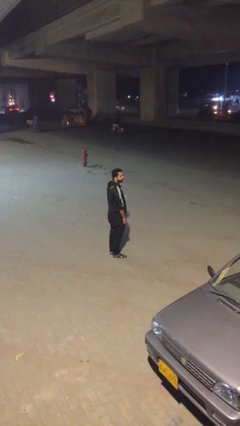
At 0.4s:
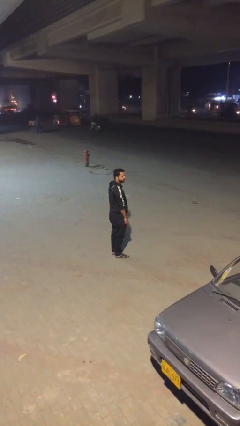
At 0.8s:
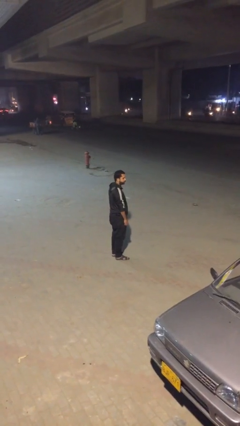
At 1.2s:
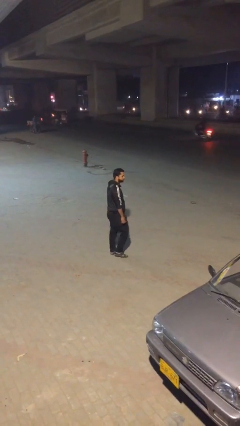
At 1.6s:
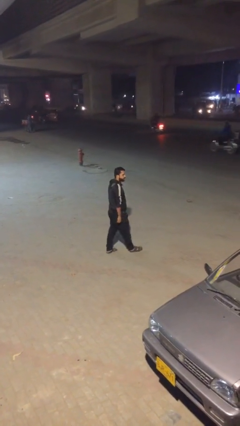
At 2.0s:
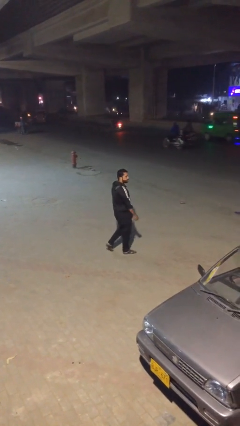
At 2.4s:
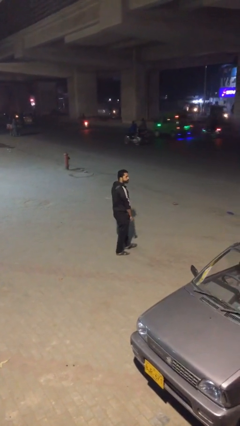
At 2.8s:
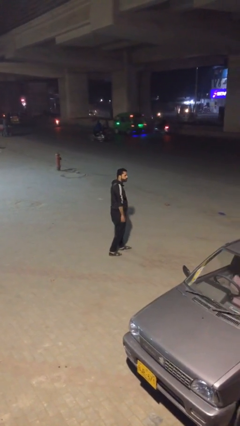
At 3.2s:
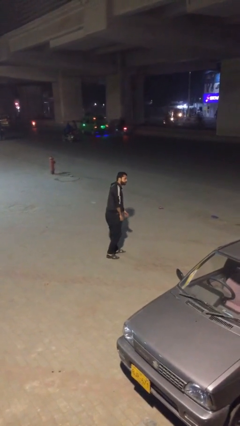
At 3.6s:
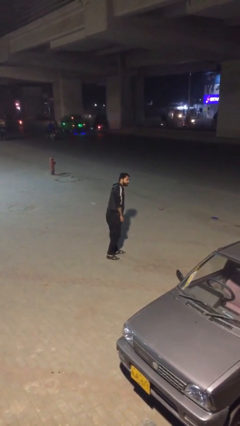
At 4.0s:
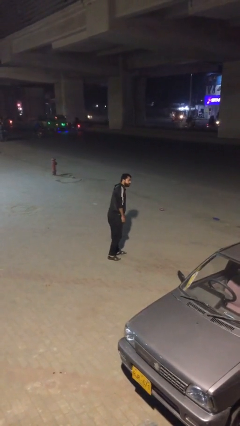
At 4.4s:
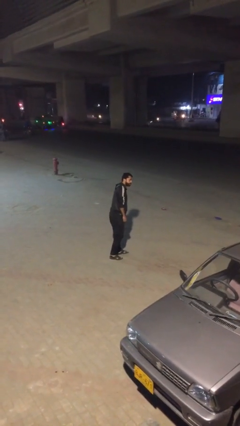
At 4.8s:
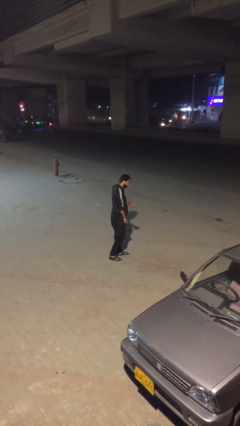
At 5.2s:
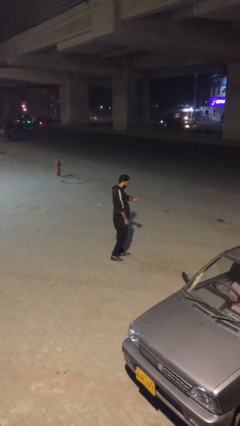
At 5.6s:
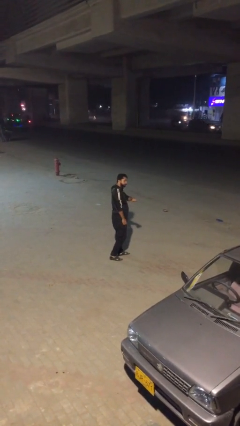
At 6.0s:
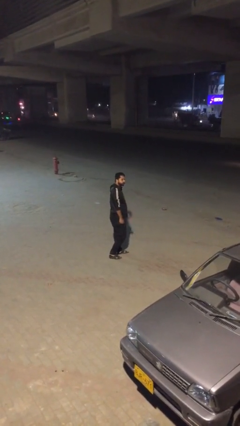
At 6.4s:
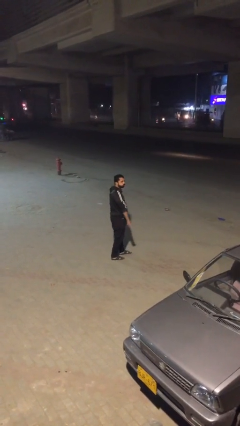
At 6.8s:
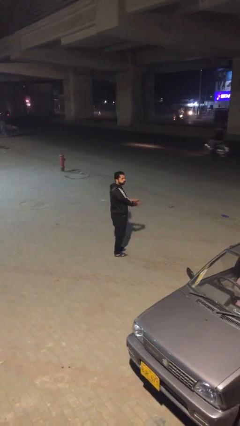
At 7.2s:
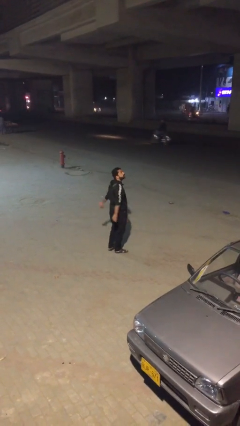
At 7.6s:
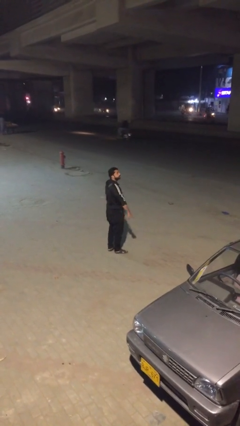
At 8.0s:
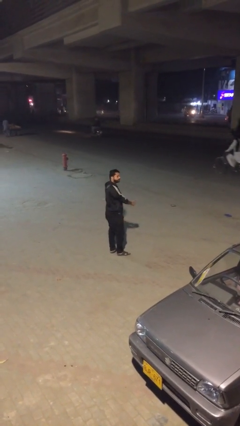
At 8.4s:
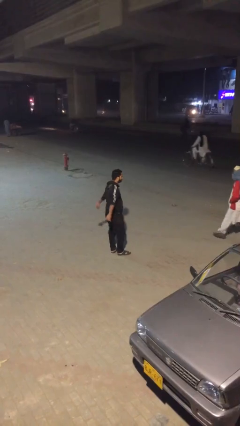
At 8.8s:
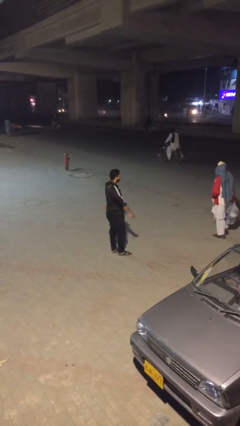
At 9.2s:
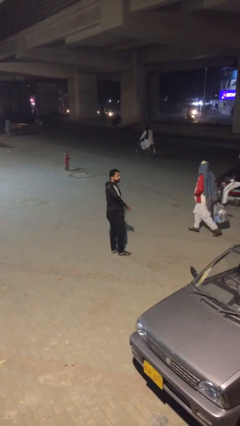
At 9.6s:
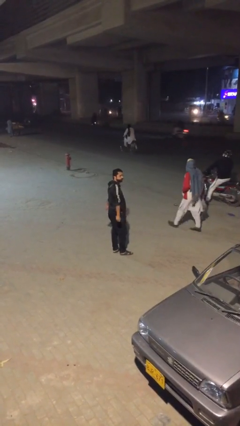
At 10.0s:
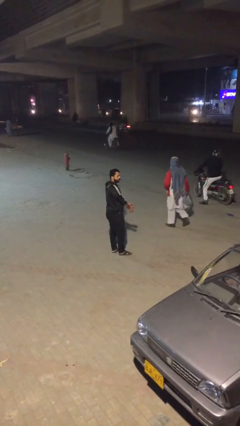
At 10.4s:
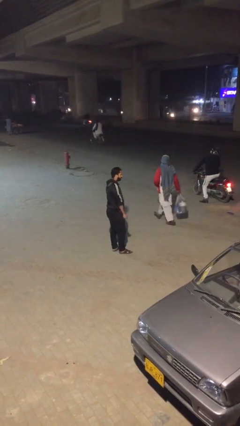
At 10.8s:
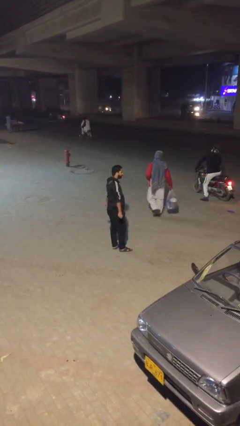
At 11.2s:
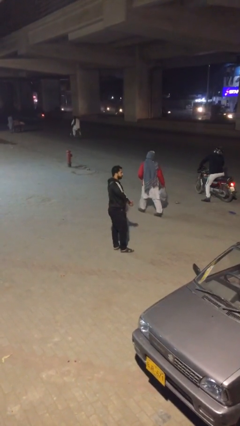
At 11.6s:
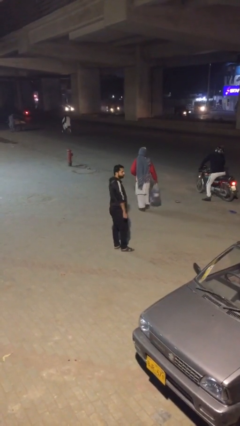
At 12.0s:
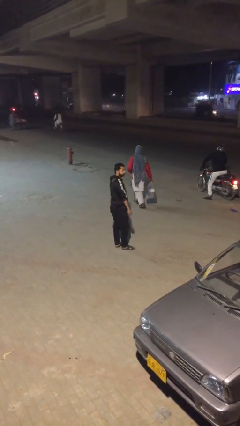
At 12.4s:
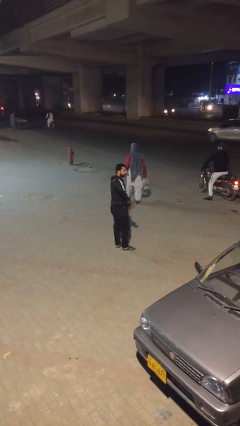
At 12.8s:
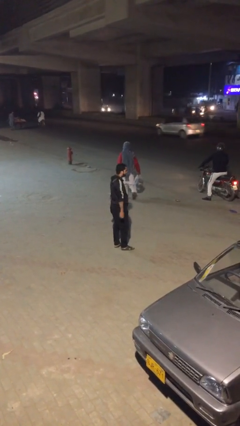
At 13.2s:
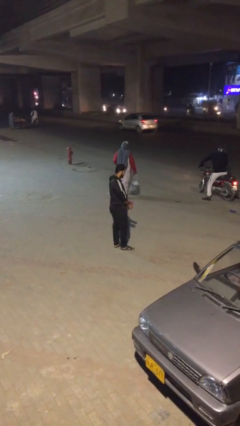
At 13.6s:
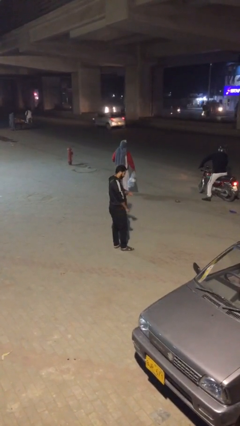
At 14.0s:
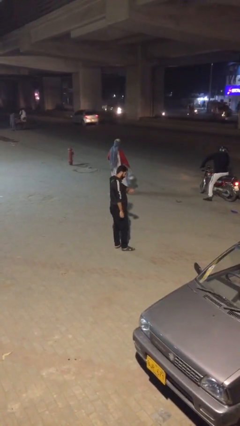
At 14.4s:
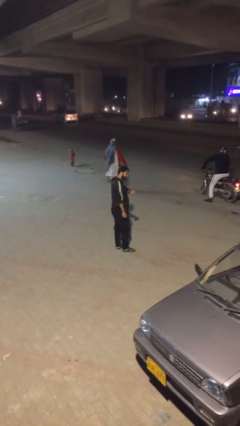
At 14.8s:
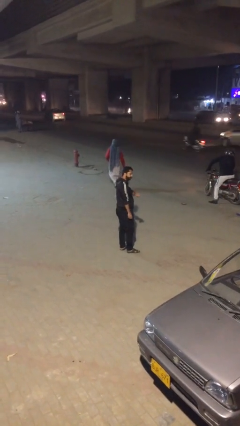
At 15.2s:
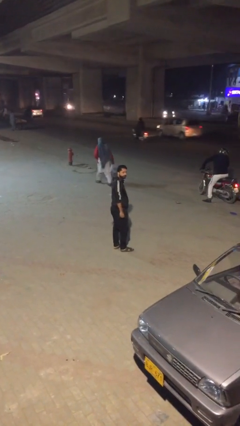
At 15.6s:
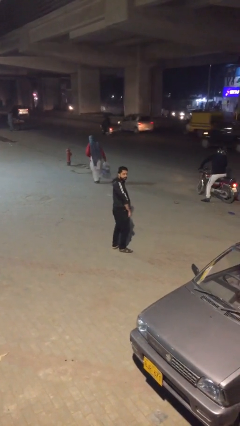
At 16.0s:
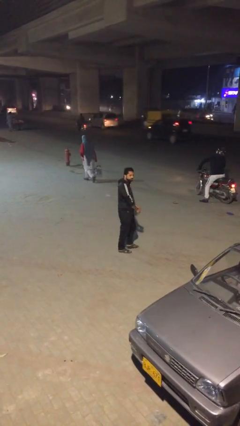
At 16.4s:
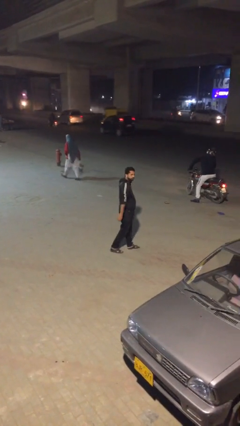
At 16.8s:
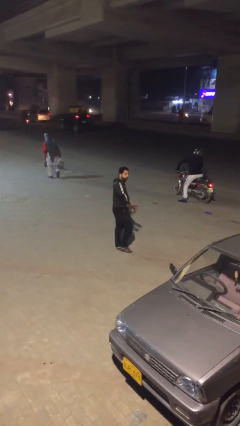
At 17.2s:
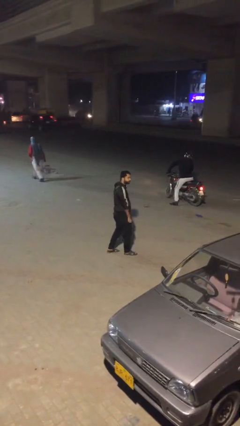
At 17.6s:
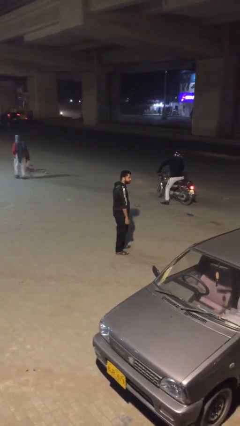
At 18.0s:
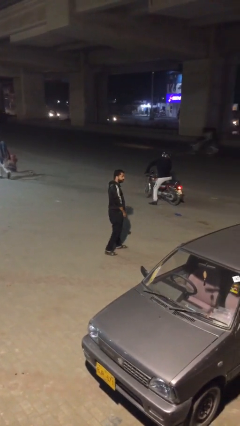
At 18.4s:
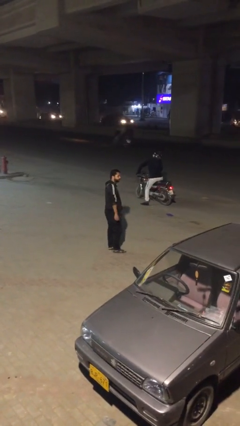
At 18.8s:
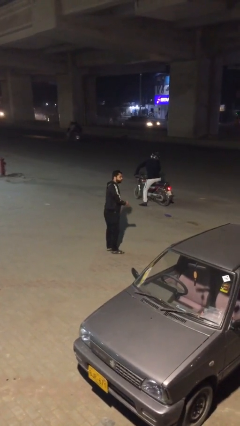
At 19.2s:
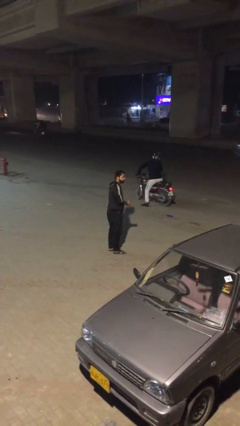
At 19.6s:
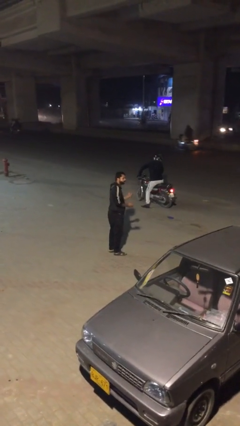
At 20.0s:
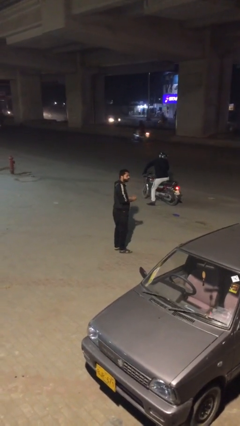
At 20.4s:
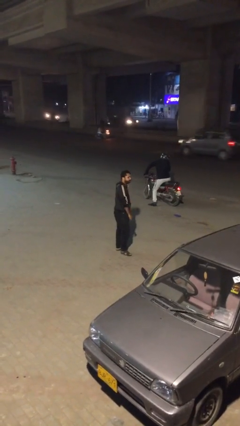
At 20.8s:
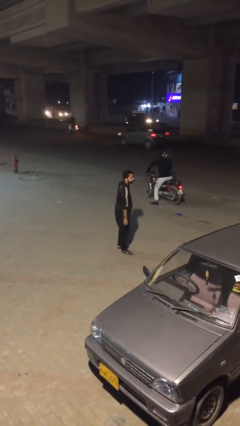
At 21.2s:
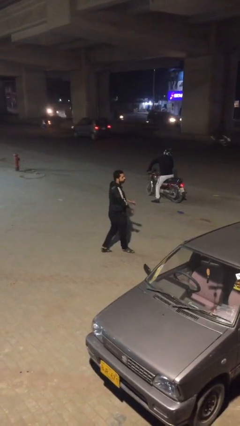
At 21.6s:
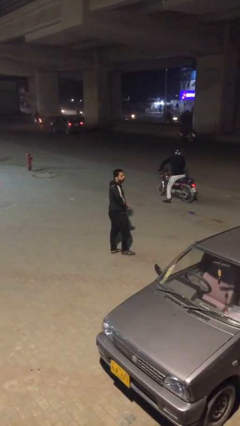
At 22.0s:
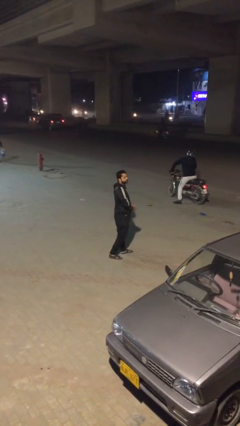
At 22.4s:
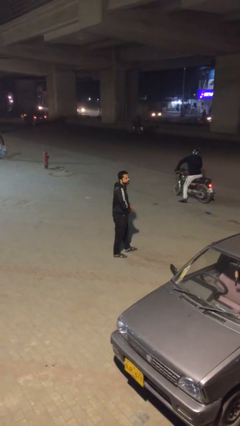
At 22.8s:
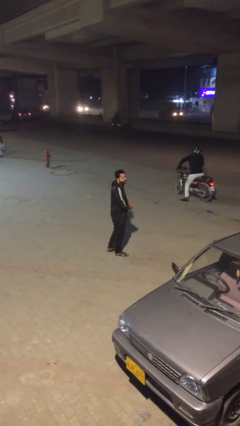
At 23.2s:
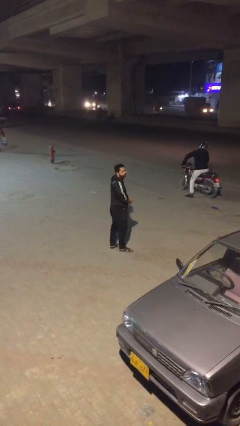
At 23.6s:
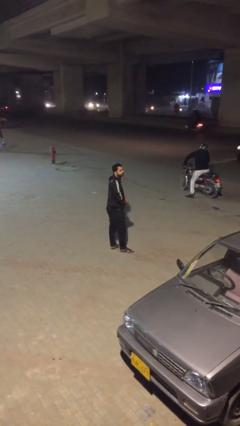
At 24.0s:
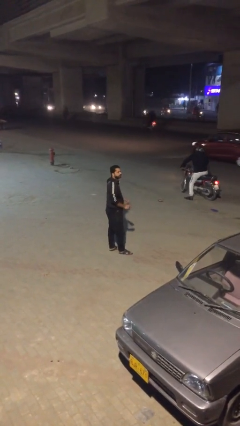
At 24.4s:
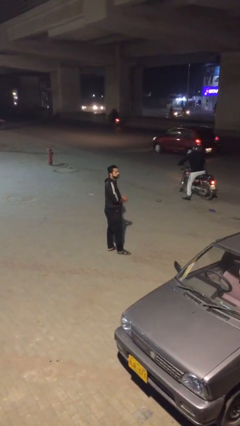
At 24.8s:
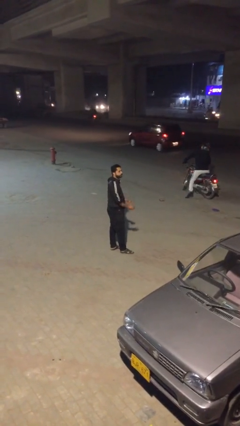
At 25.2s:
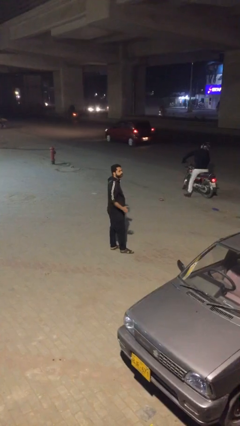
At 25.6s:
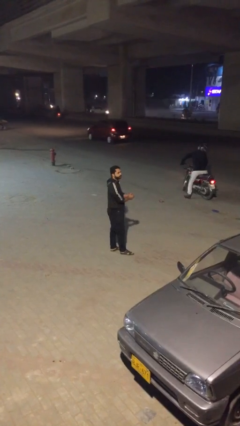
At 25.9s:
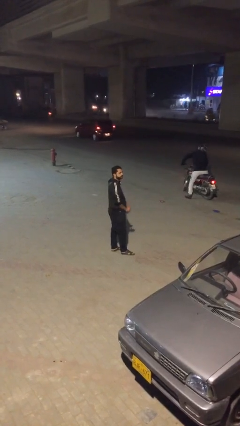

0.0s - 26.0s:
person walks

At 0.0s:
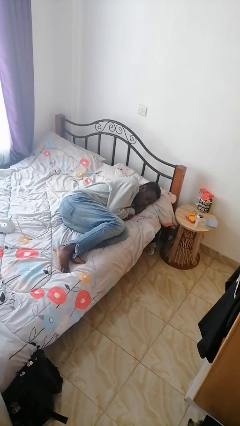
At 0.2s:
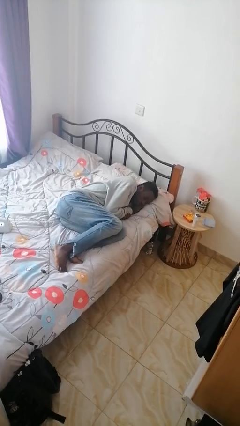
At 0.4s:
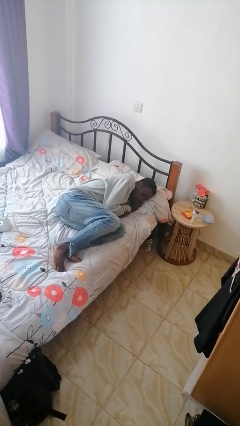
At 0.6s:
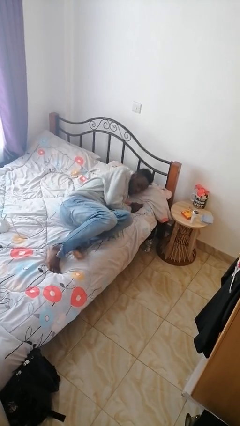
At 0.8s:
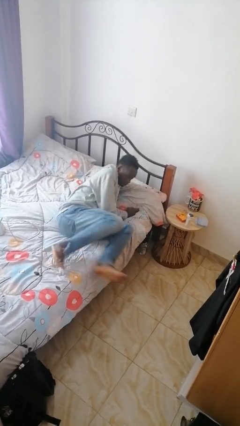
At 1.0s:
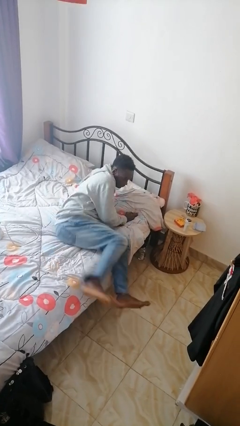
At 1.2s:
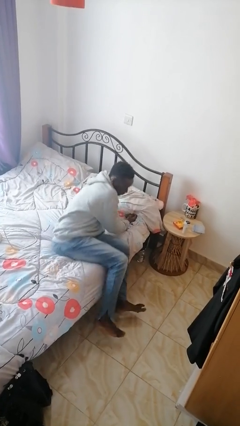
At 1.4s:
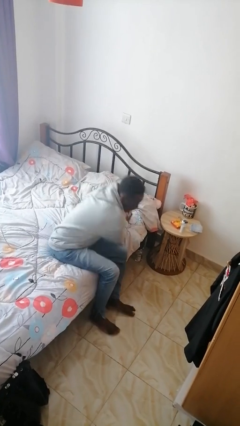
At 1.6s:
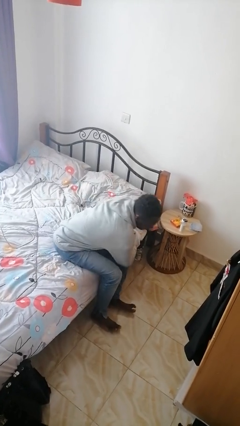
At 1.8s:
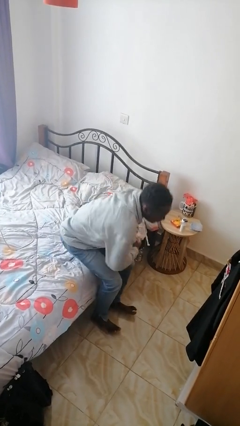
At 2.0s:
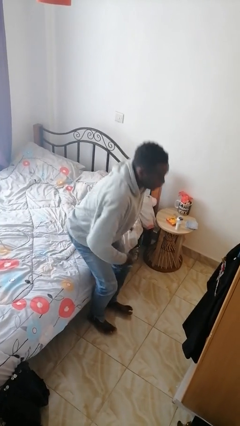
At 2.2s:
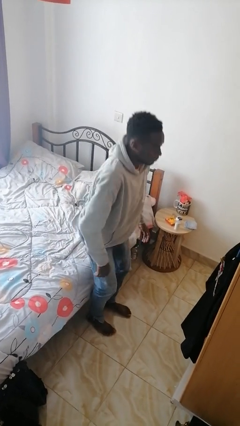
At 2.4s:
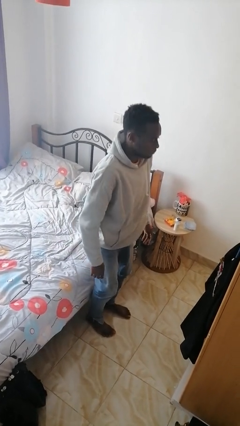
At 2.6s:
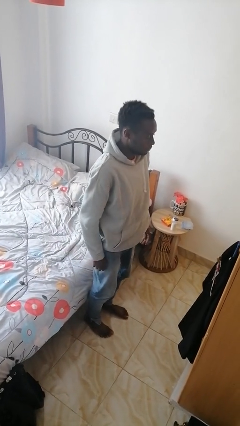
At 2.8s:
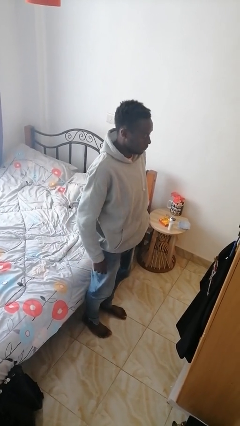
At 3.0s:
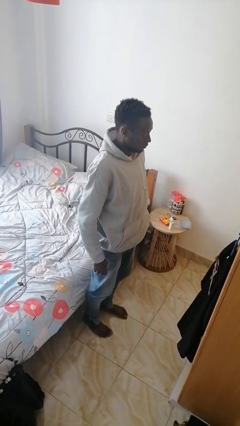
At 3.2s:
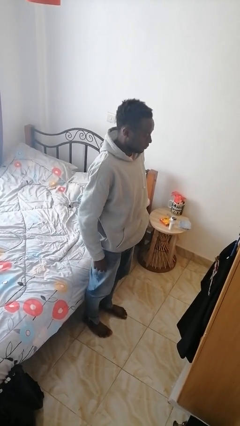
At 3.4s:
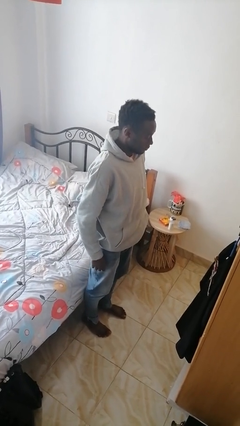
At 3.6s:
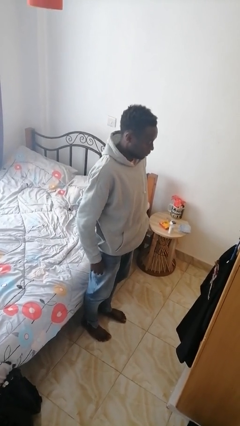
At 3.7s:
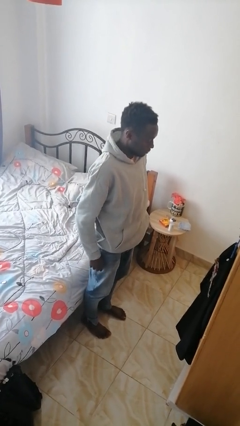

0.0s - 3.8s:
person stands up

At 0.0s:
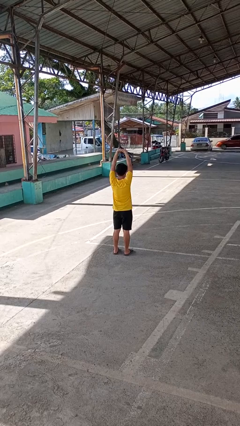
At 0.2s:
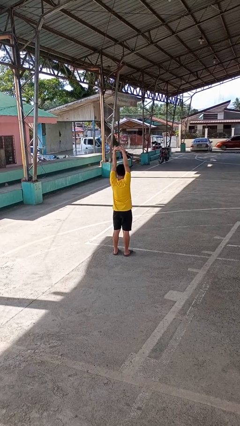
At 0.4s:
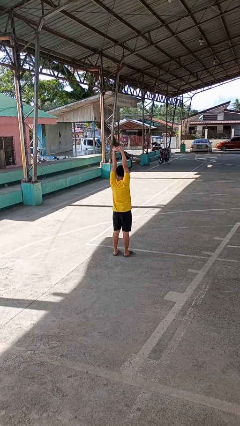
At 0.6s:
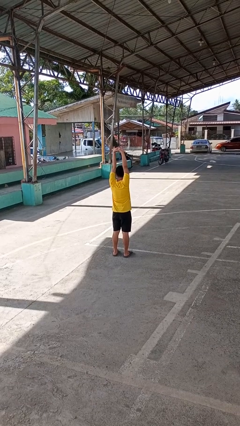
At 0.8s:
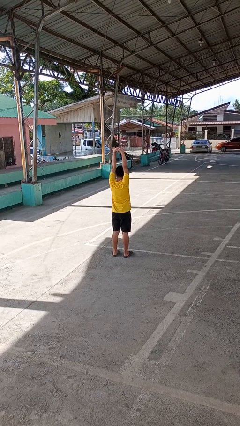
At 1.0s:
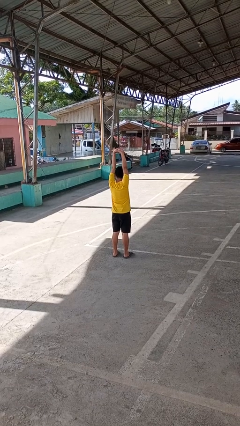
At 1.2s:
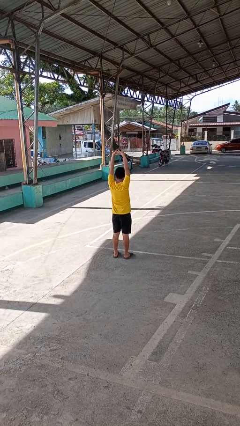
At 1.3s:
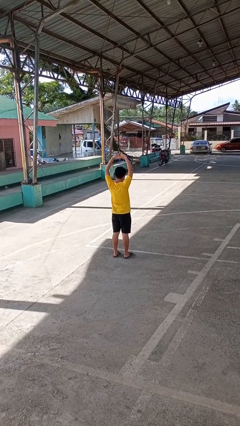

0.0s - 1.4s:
person stretches arms over head

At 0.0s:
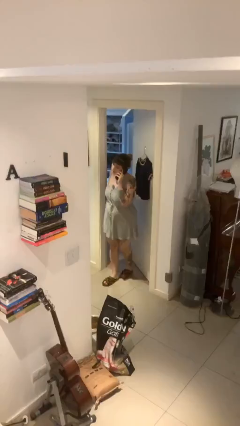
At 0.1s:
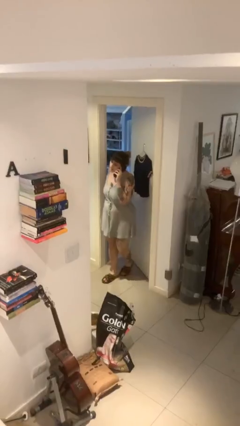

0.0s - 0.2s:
person closes facility door
